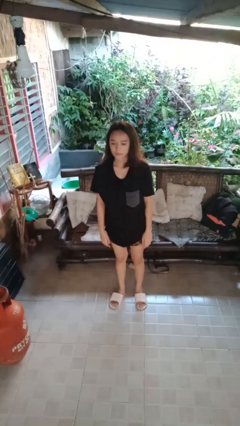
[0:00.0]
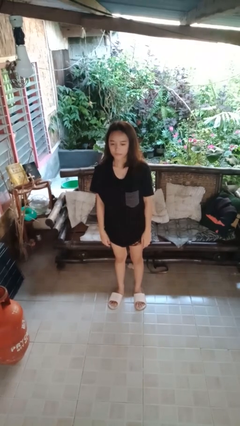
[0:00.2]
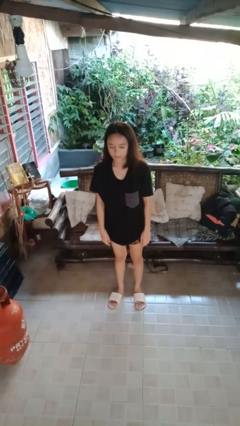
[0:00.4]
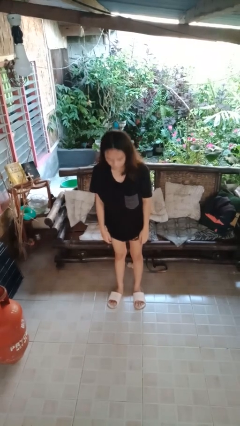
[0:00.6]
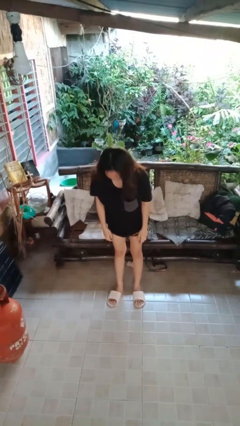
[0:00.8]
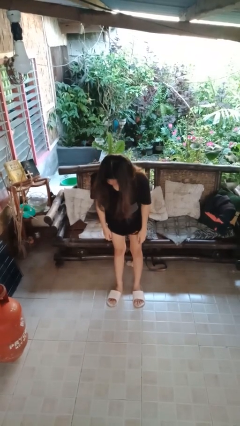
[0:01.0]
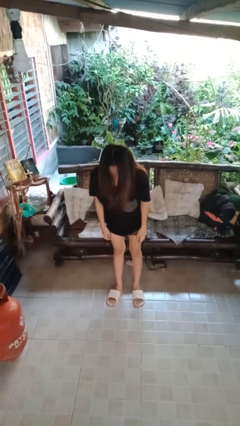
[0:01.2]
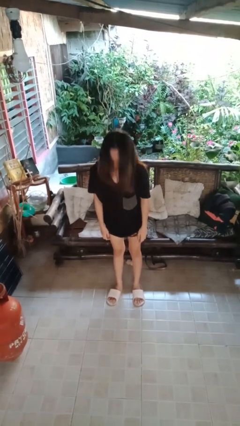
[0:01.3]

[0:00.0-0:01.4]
person bows

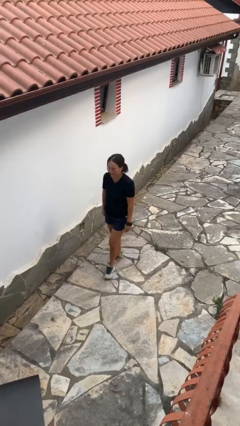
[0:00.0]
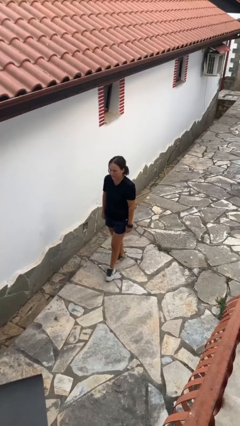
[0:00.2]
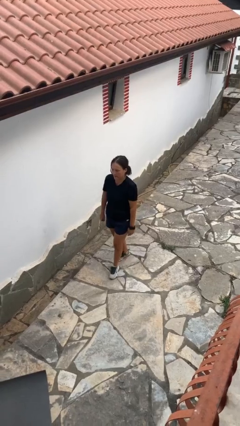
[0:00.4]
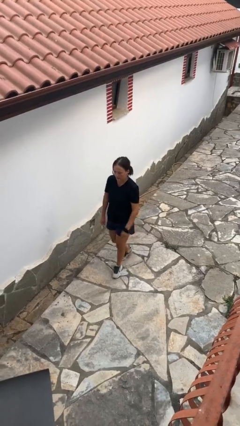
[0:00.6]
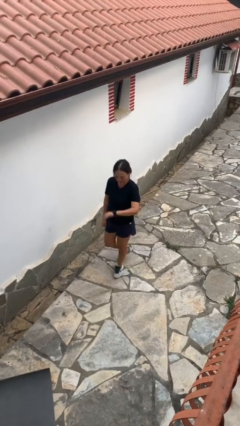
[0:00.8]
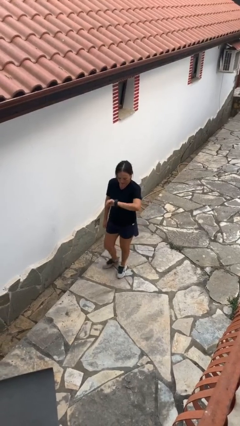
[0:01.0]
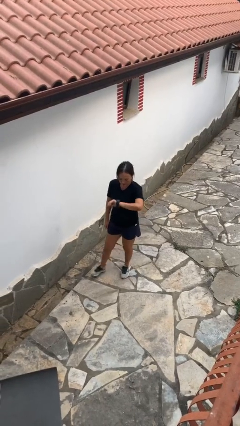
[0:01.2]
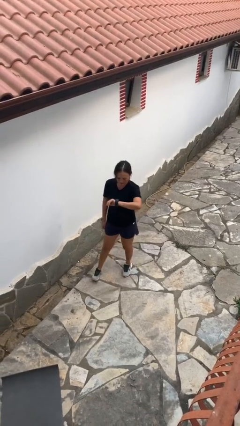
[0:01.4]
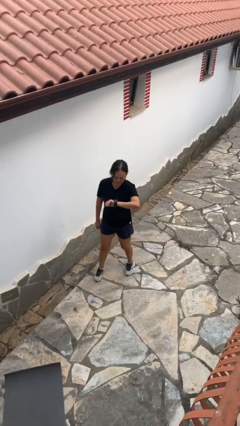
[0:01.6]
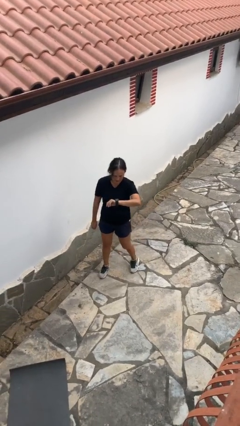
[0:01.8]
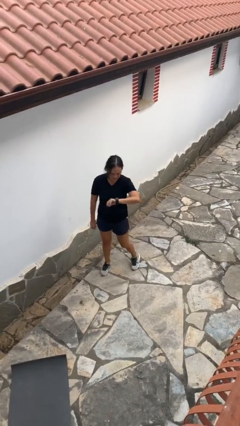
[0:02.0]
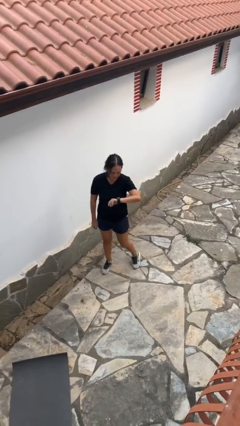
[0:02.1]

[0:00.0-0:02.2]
person looks at wristwatch

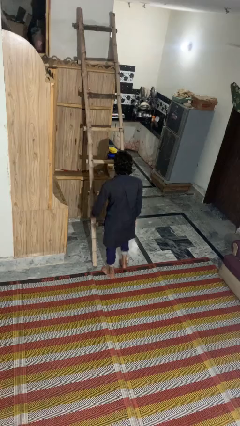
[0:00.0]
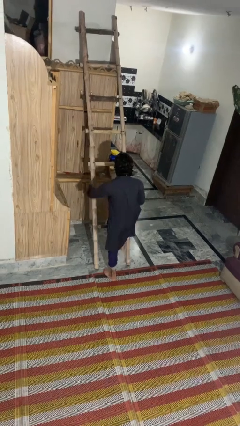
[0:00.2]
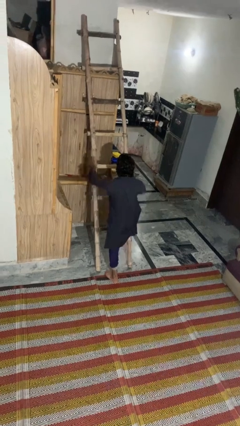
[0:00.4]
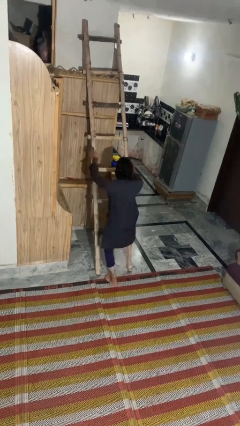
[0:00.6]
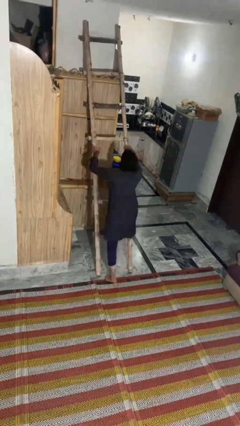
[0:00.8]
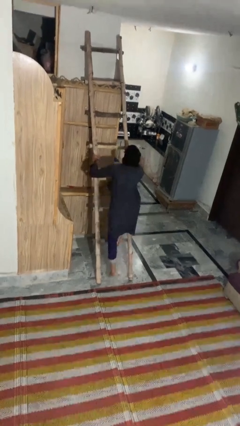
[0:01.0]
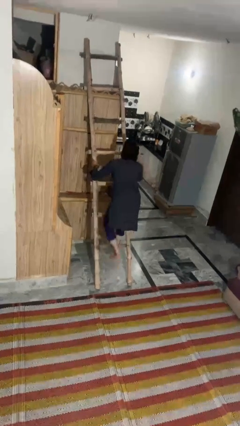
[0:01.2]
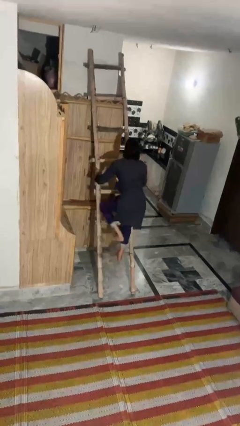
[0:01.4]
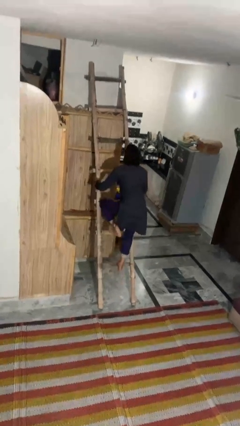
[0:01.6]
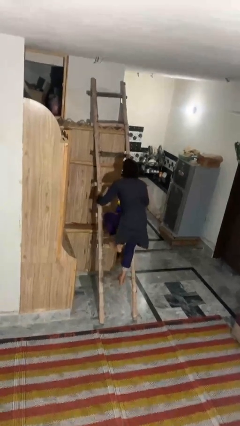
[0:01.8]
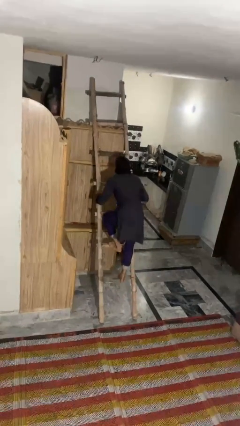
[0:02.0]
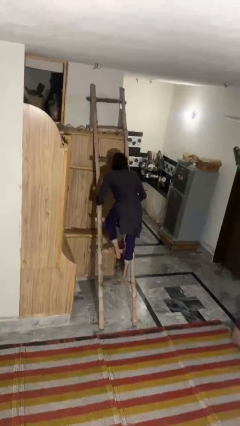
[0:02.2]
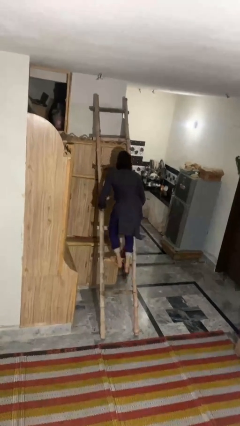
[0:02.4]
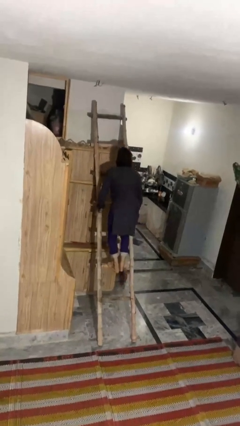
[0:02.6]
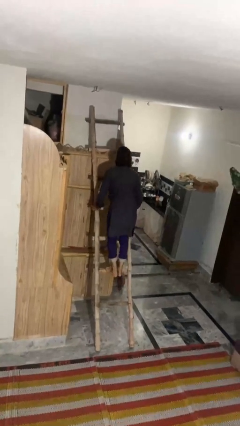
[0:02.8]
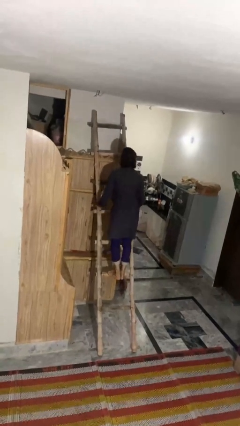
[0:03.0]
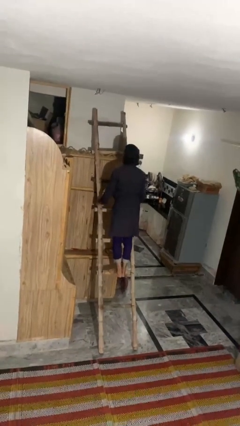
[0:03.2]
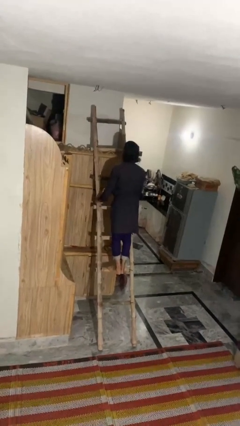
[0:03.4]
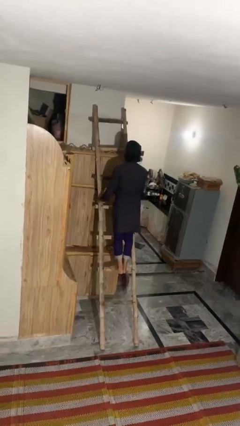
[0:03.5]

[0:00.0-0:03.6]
person climbs up ladder

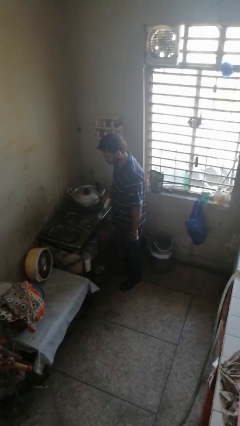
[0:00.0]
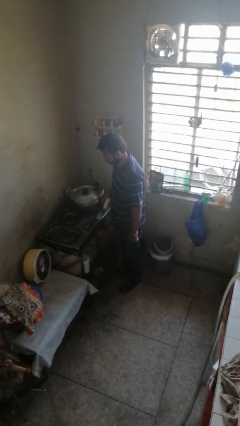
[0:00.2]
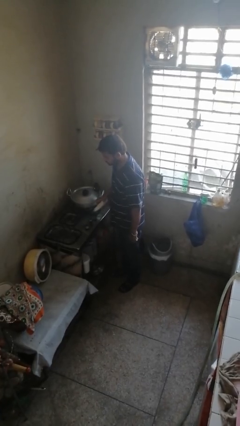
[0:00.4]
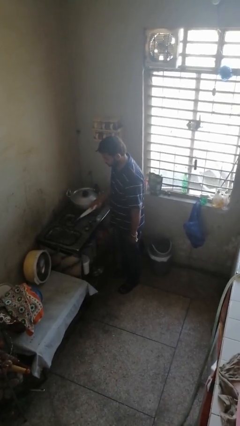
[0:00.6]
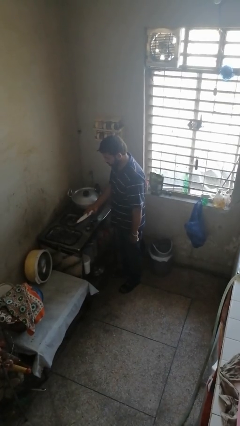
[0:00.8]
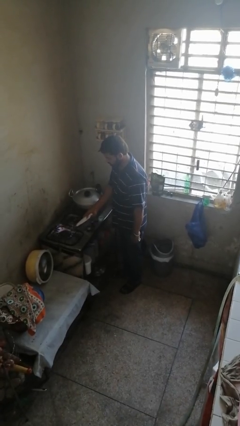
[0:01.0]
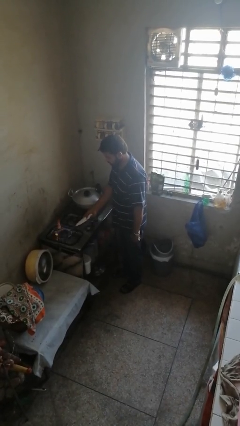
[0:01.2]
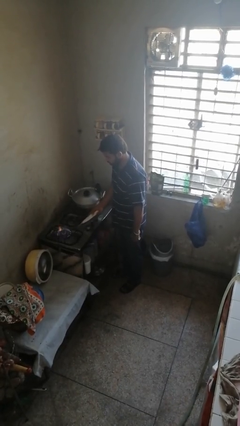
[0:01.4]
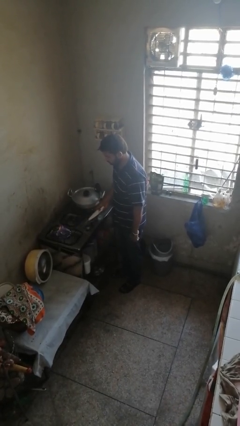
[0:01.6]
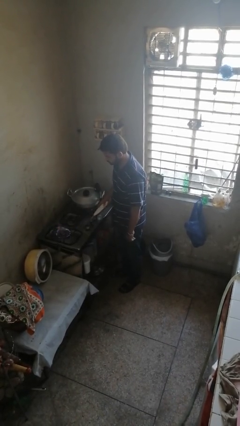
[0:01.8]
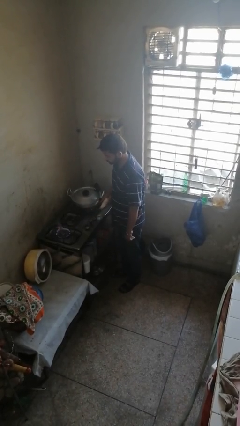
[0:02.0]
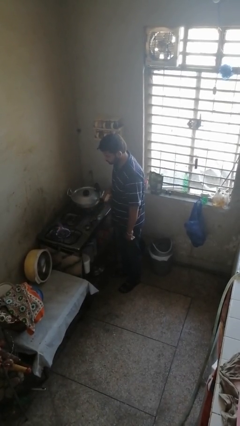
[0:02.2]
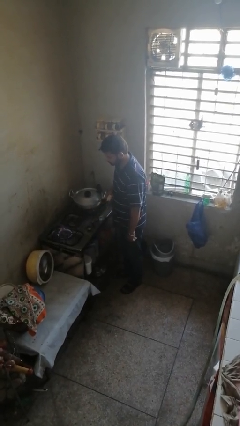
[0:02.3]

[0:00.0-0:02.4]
person turns on stovetop

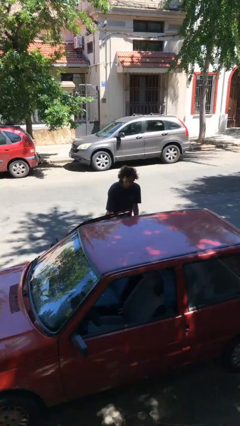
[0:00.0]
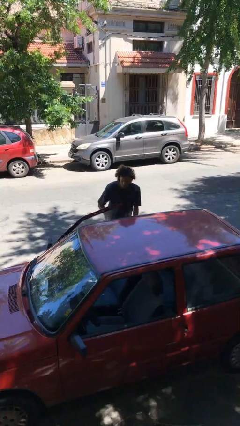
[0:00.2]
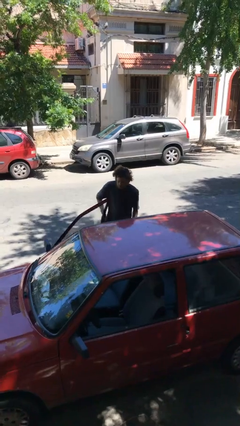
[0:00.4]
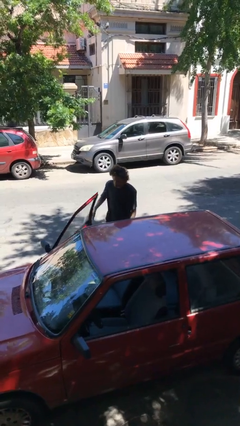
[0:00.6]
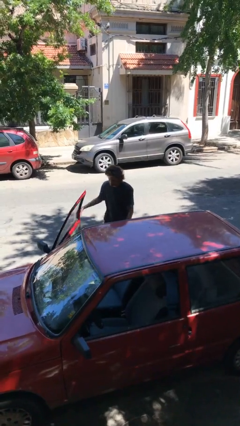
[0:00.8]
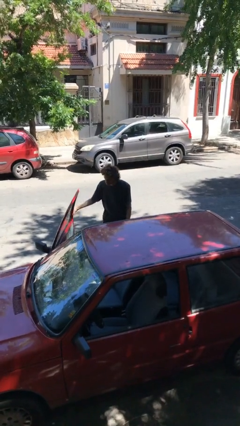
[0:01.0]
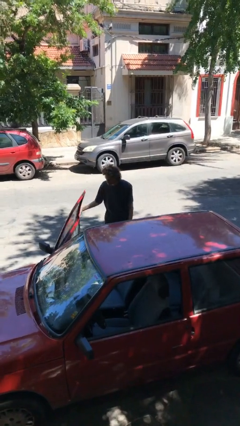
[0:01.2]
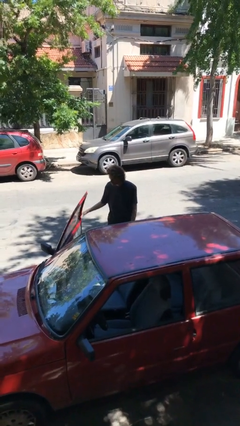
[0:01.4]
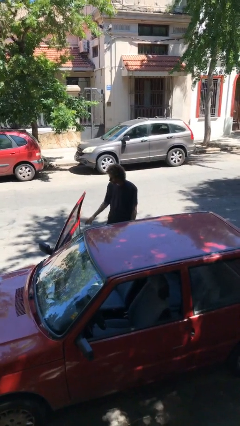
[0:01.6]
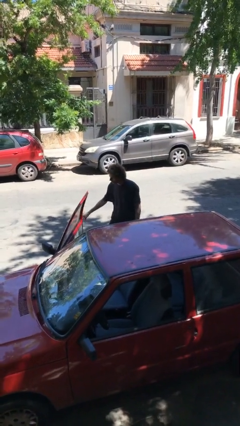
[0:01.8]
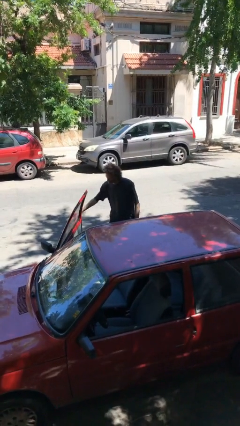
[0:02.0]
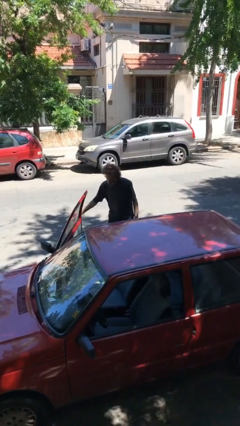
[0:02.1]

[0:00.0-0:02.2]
person opens car door

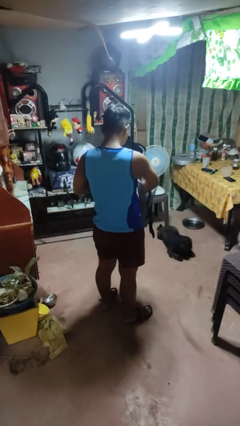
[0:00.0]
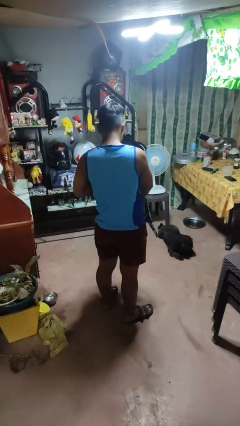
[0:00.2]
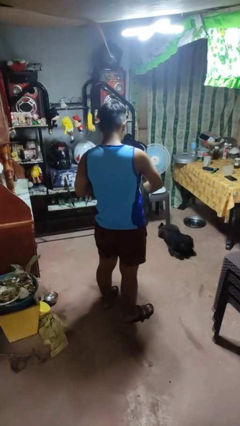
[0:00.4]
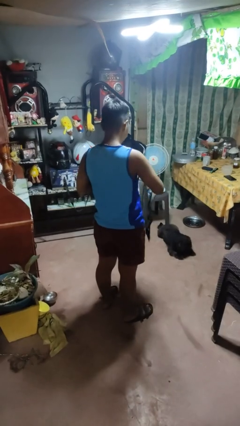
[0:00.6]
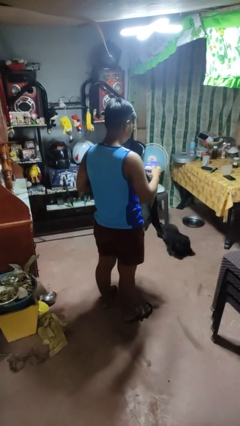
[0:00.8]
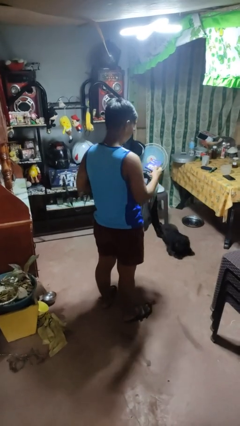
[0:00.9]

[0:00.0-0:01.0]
person takes object from bag

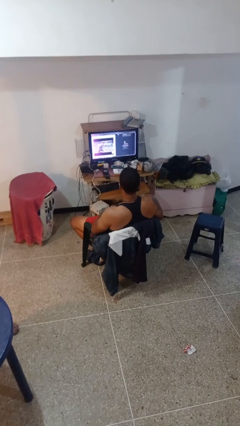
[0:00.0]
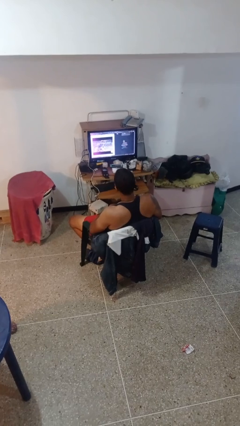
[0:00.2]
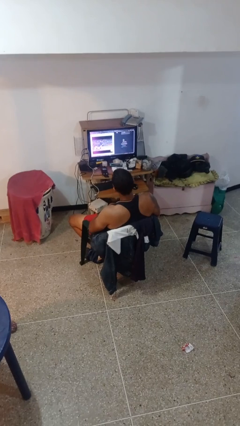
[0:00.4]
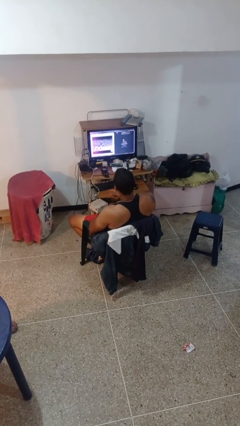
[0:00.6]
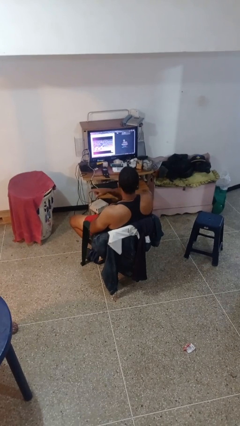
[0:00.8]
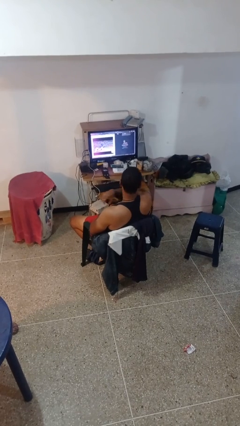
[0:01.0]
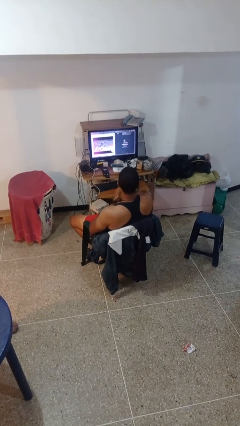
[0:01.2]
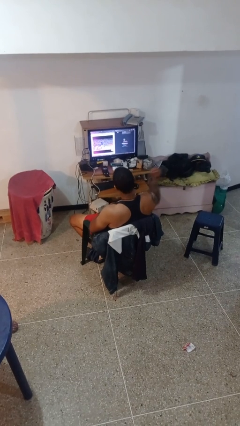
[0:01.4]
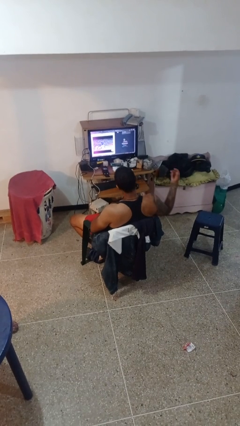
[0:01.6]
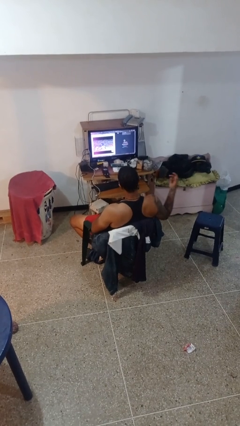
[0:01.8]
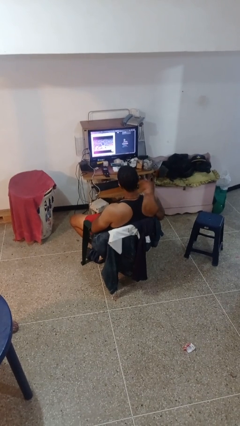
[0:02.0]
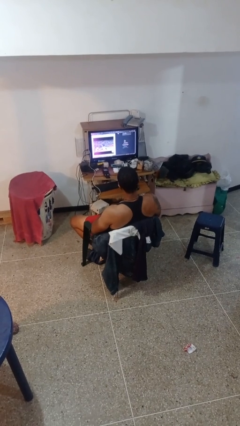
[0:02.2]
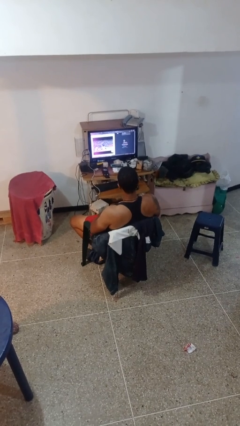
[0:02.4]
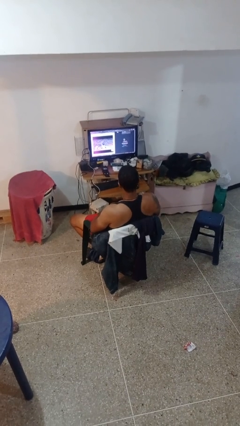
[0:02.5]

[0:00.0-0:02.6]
person gestures cut

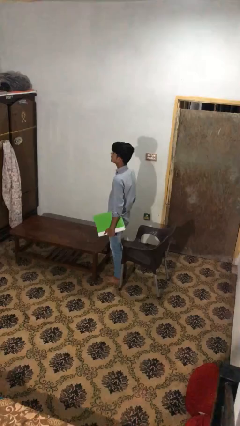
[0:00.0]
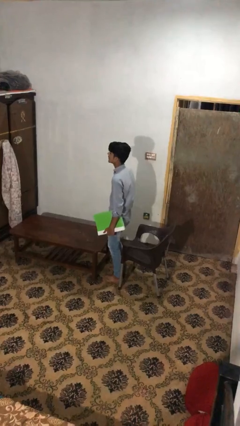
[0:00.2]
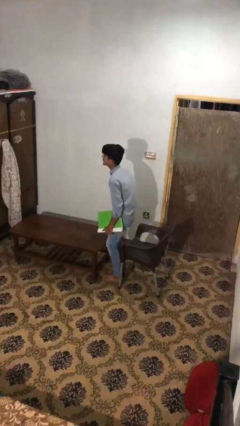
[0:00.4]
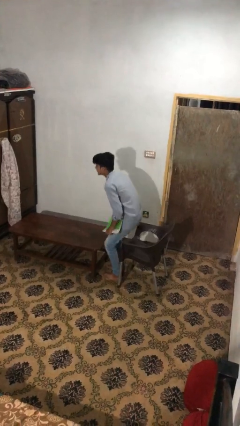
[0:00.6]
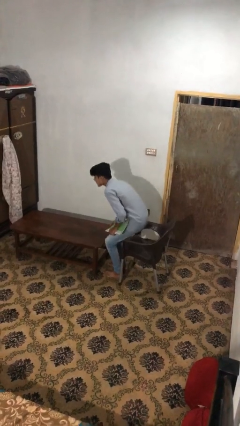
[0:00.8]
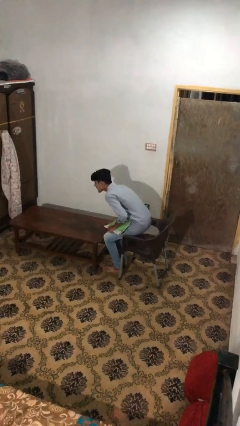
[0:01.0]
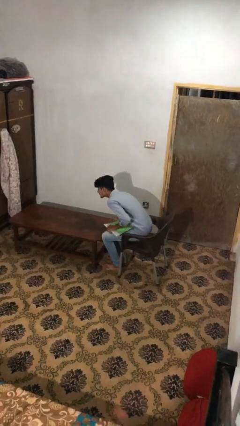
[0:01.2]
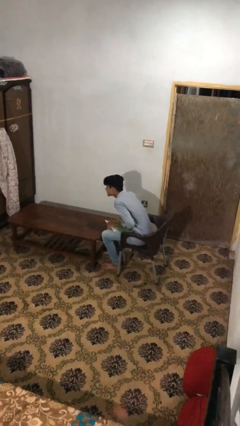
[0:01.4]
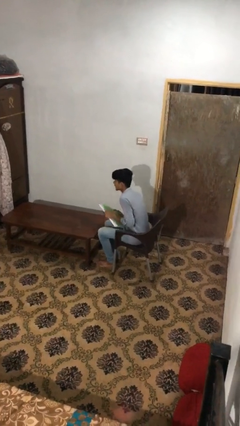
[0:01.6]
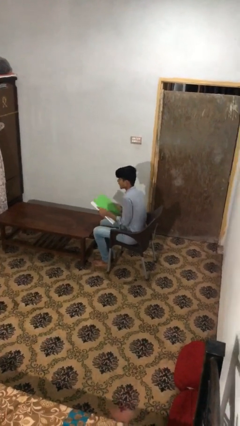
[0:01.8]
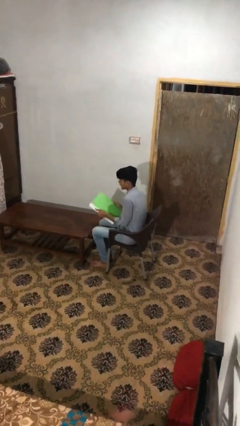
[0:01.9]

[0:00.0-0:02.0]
person sits down
